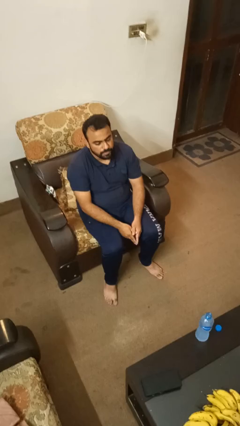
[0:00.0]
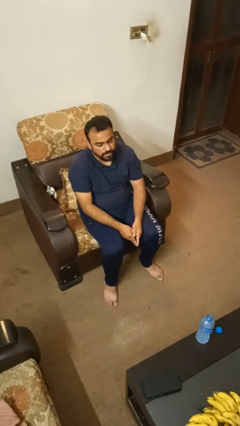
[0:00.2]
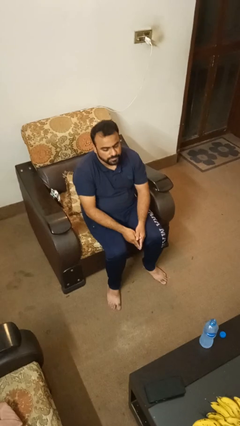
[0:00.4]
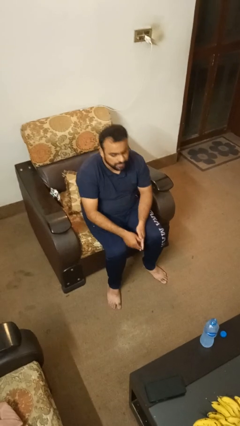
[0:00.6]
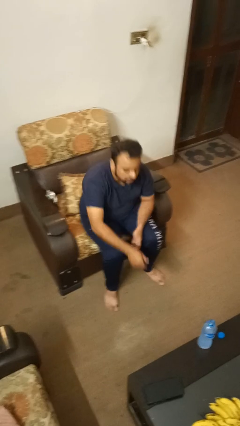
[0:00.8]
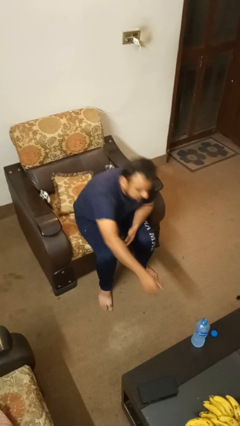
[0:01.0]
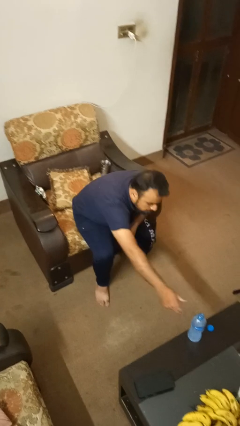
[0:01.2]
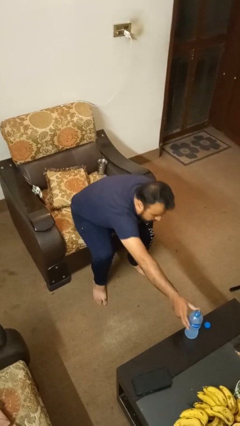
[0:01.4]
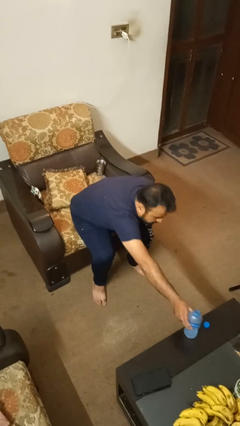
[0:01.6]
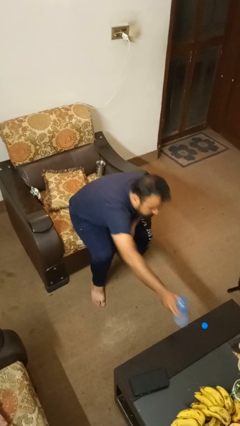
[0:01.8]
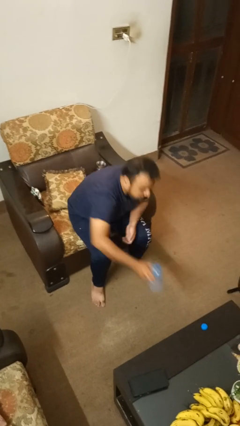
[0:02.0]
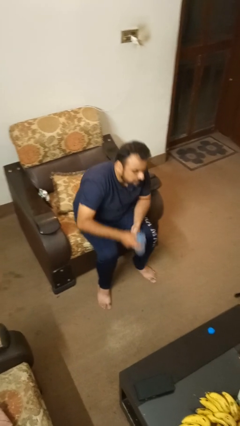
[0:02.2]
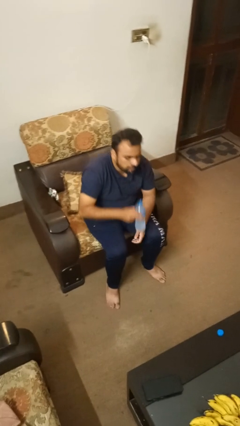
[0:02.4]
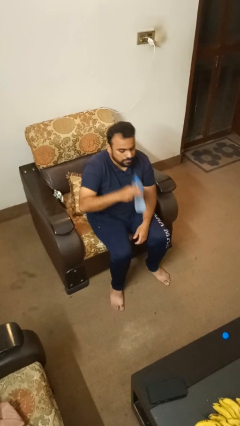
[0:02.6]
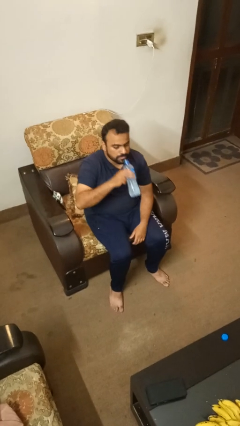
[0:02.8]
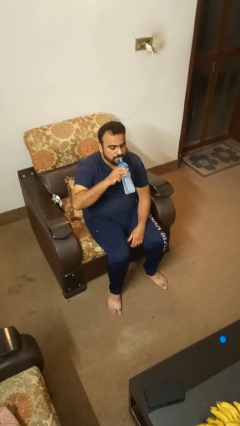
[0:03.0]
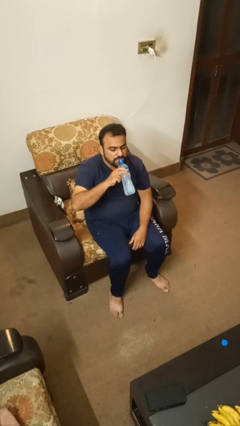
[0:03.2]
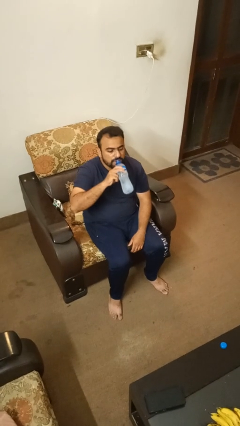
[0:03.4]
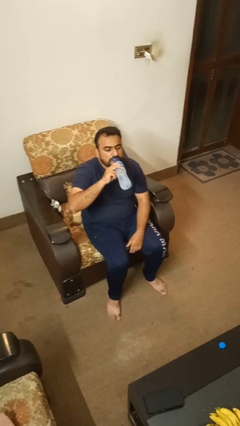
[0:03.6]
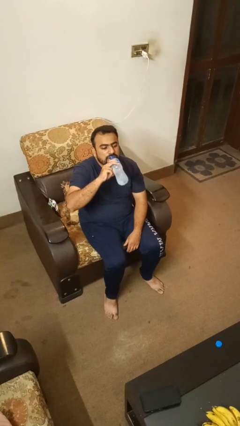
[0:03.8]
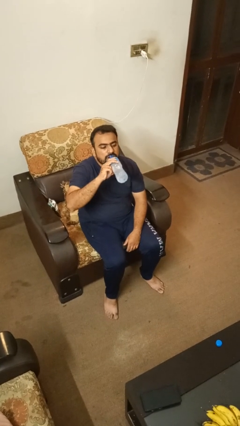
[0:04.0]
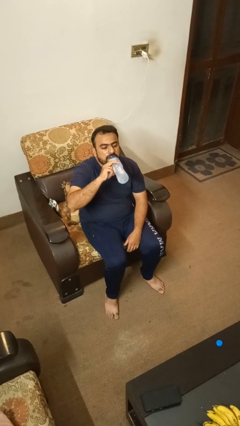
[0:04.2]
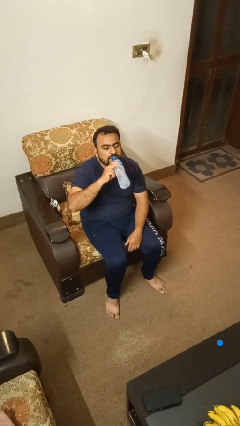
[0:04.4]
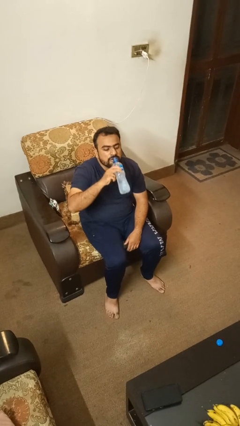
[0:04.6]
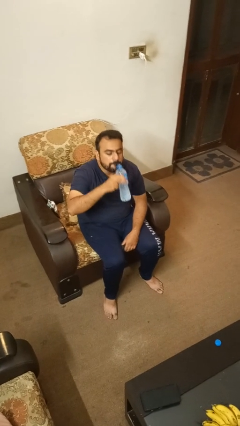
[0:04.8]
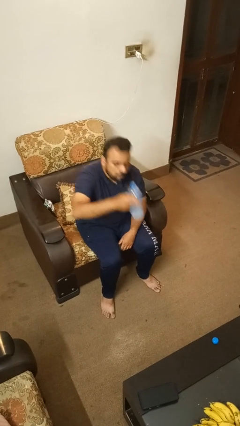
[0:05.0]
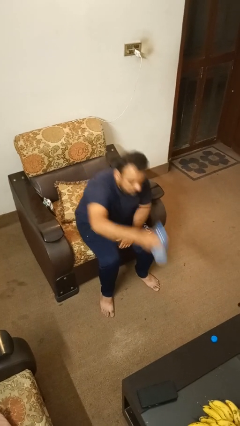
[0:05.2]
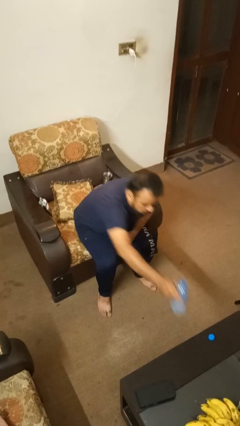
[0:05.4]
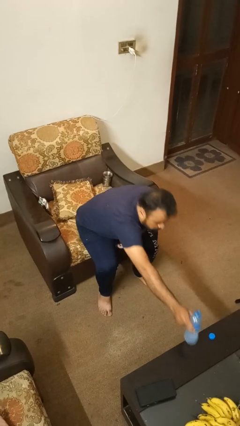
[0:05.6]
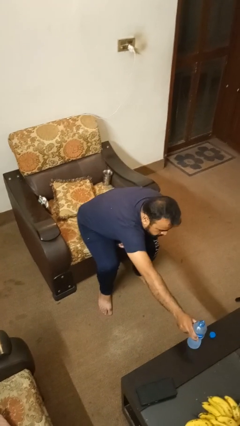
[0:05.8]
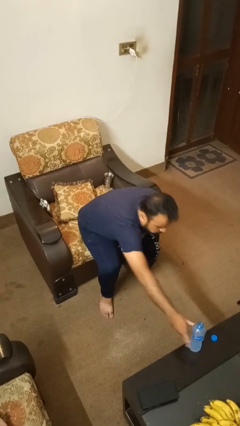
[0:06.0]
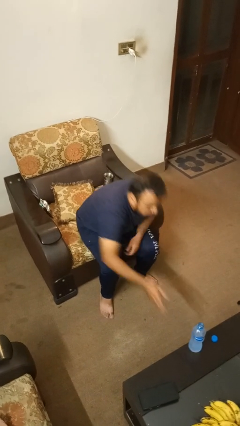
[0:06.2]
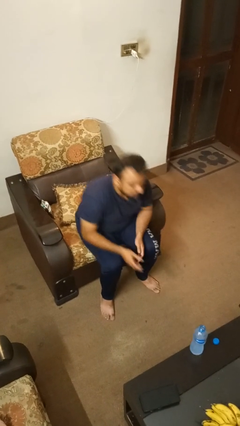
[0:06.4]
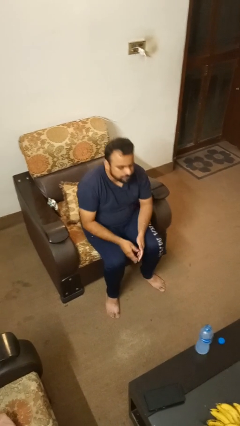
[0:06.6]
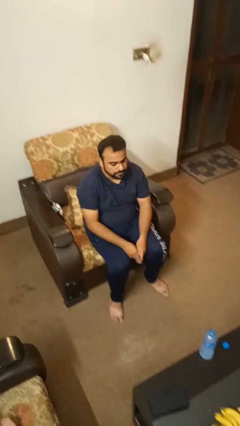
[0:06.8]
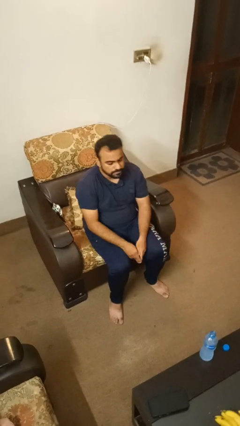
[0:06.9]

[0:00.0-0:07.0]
person drinks from bottle

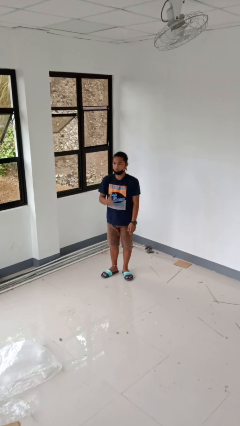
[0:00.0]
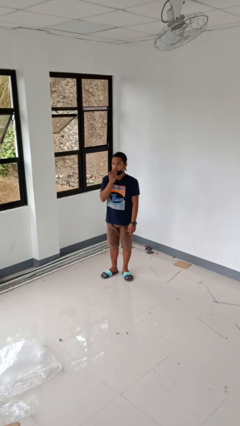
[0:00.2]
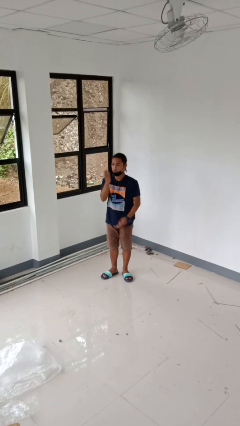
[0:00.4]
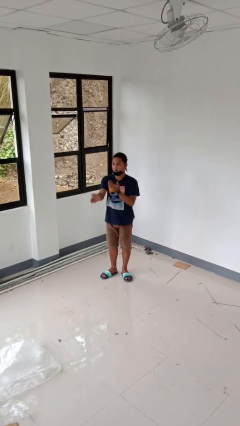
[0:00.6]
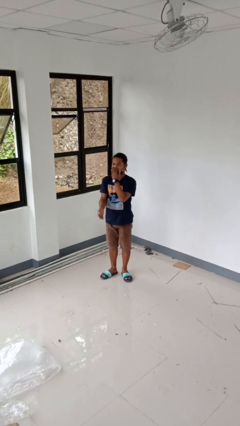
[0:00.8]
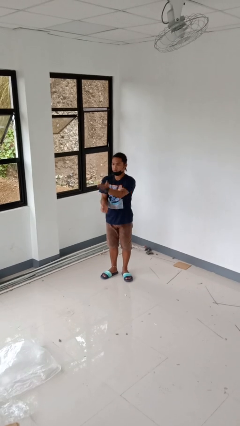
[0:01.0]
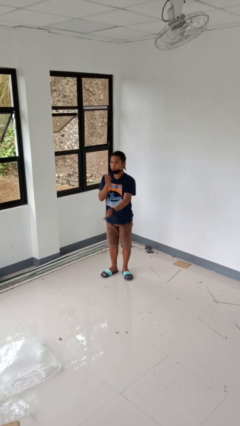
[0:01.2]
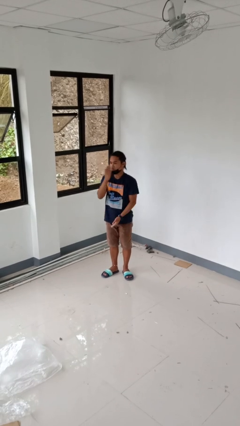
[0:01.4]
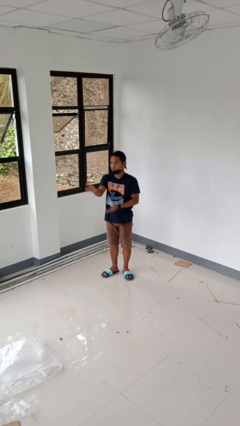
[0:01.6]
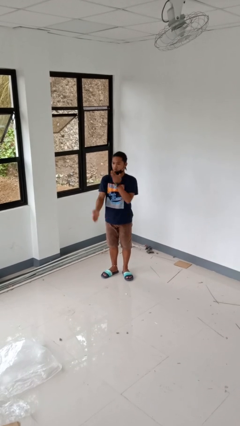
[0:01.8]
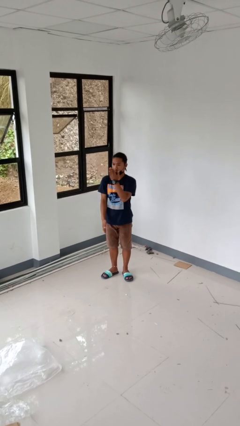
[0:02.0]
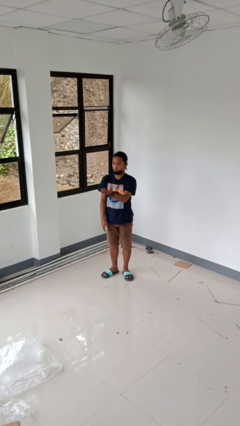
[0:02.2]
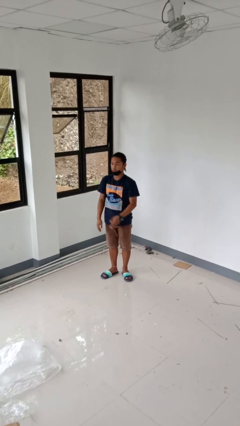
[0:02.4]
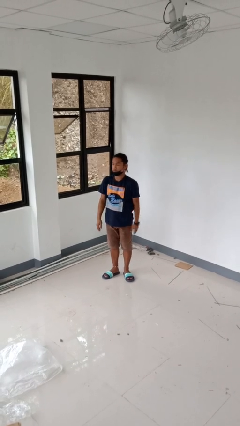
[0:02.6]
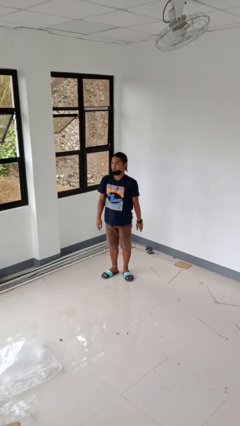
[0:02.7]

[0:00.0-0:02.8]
person gestures blow kiss

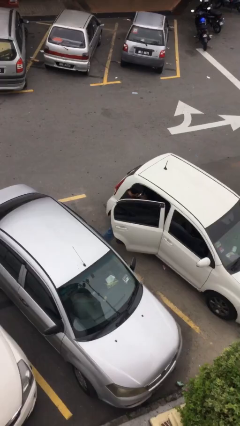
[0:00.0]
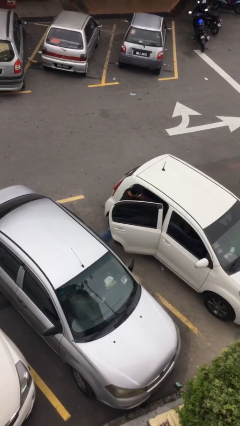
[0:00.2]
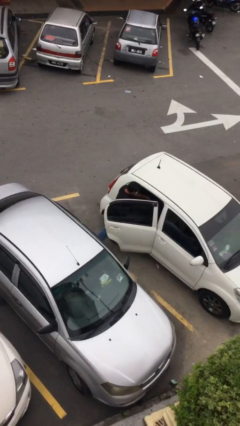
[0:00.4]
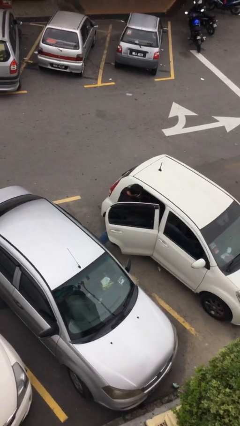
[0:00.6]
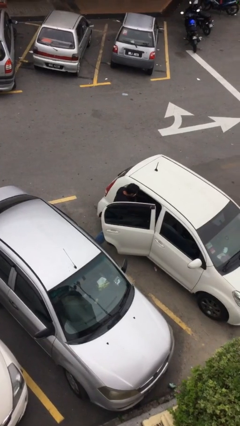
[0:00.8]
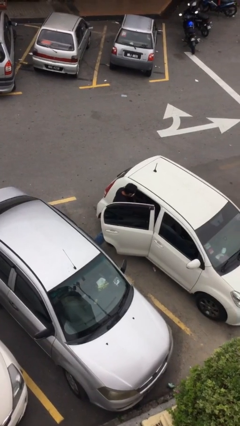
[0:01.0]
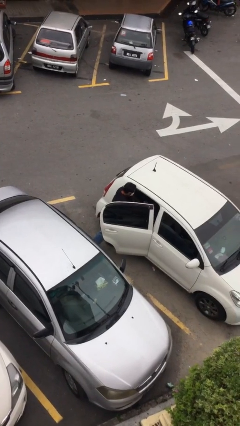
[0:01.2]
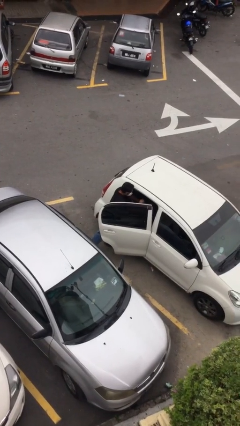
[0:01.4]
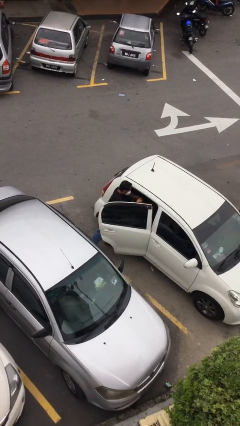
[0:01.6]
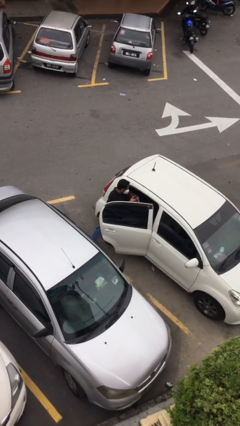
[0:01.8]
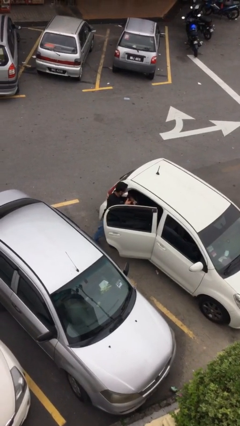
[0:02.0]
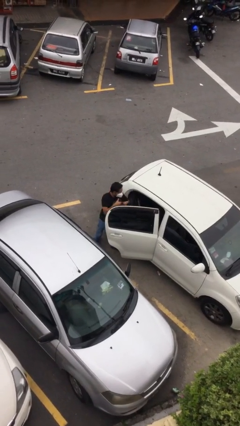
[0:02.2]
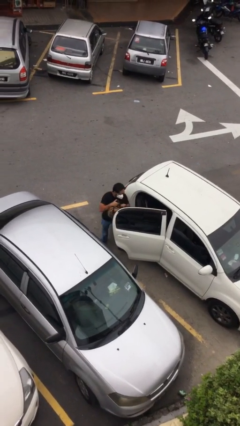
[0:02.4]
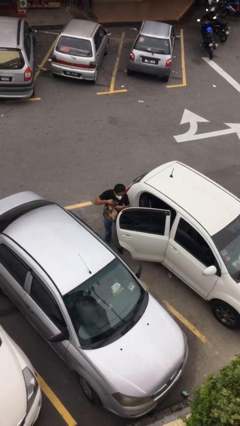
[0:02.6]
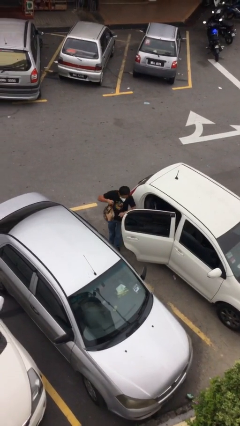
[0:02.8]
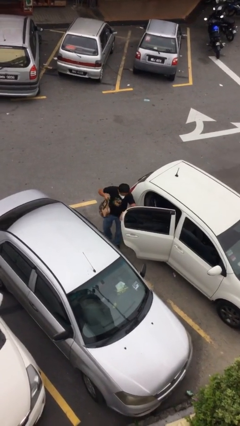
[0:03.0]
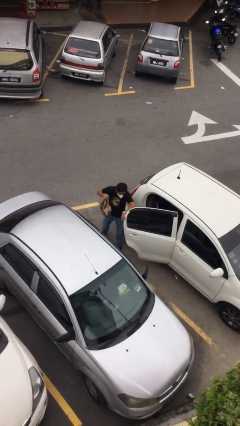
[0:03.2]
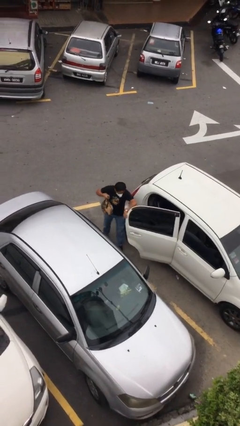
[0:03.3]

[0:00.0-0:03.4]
person unloads car

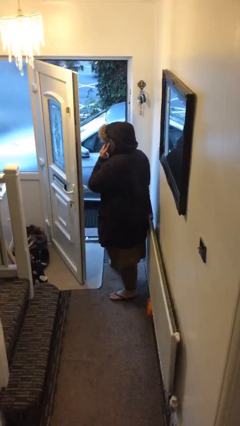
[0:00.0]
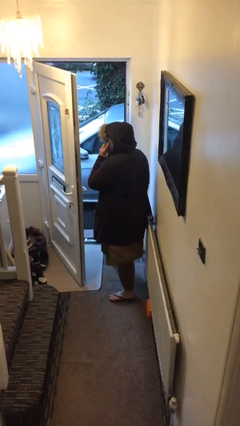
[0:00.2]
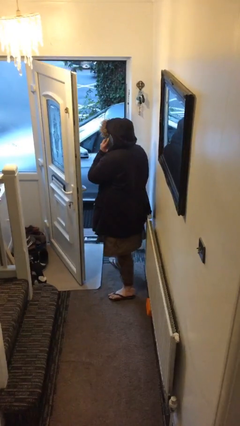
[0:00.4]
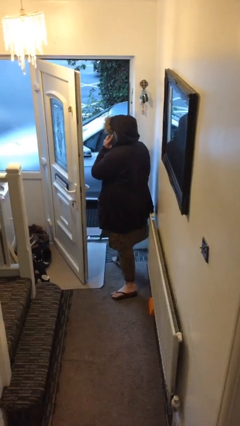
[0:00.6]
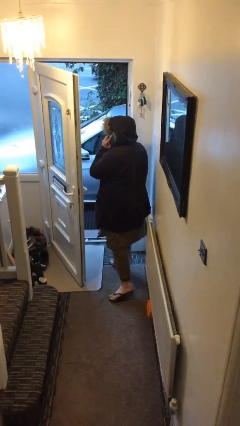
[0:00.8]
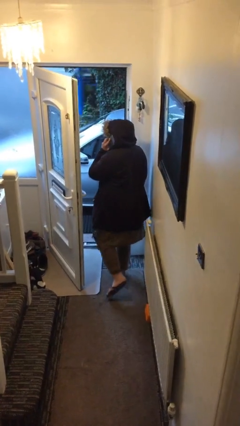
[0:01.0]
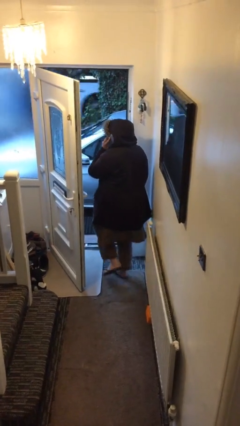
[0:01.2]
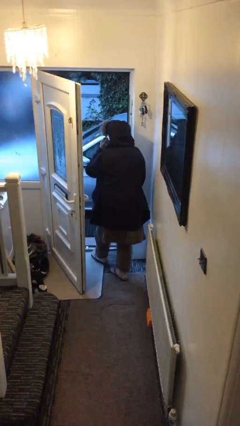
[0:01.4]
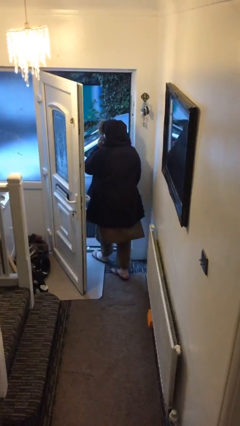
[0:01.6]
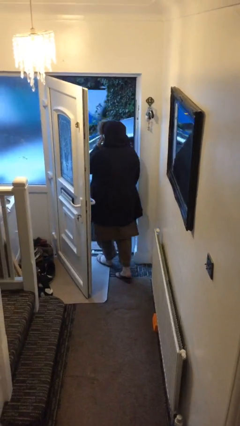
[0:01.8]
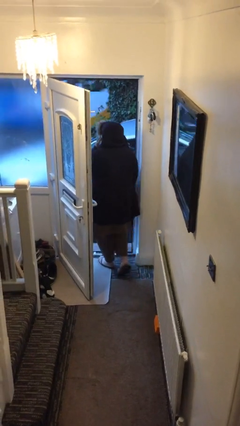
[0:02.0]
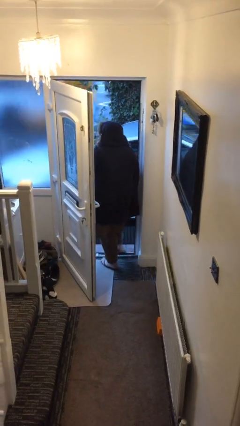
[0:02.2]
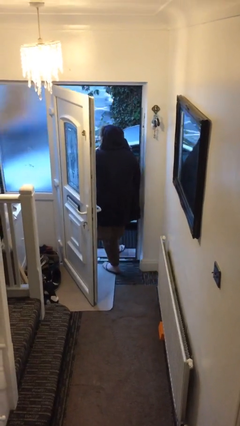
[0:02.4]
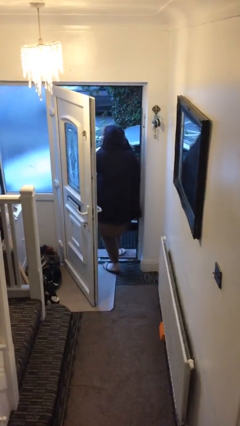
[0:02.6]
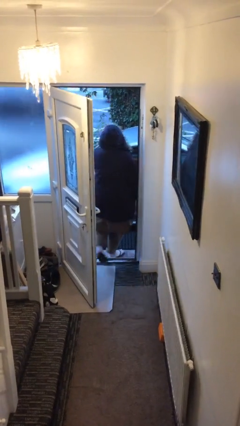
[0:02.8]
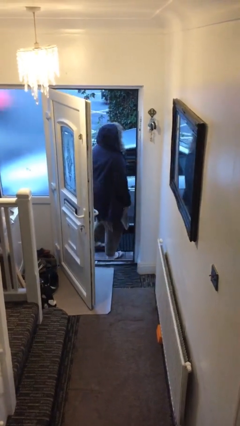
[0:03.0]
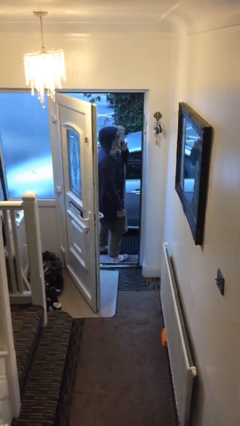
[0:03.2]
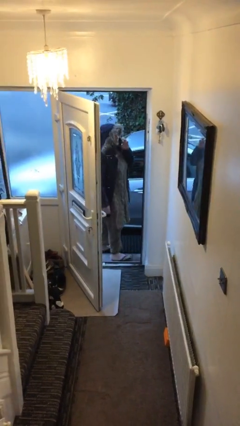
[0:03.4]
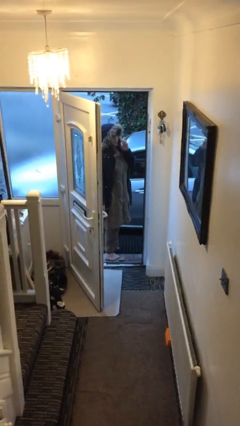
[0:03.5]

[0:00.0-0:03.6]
person exits scene through structure

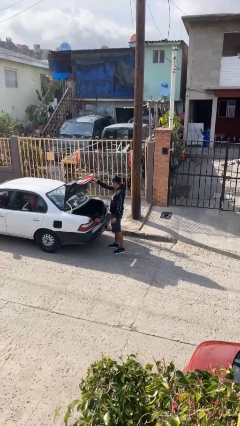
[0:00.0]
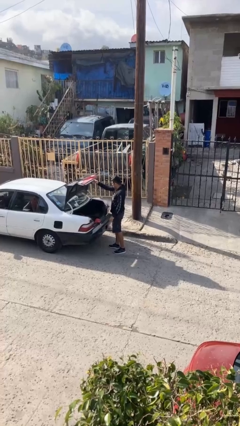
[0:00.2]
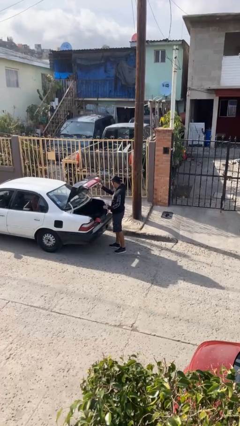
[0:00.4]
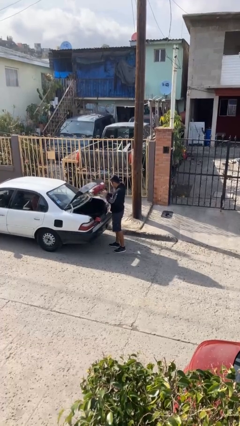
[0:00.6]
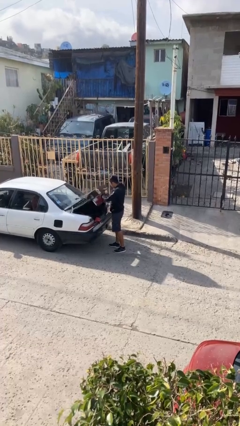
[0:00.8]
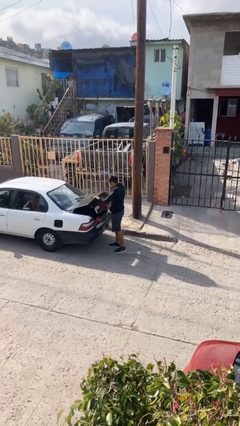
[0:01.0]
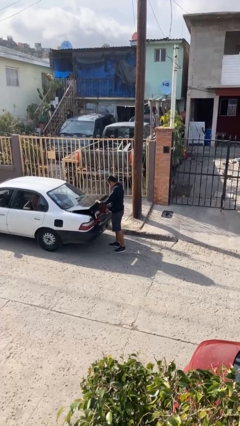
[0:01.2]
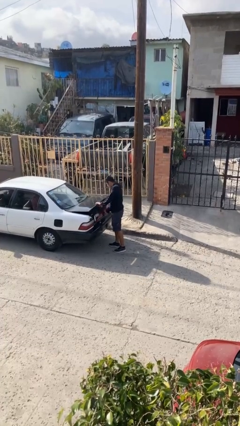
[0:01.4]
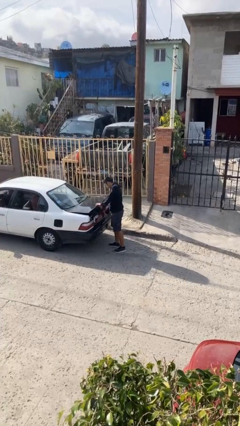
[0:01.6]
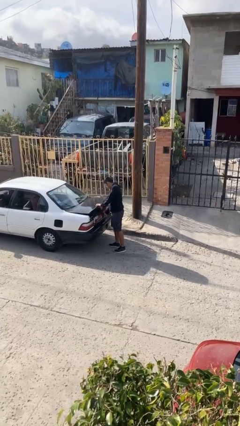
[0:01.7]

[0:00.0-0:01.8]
person closes car trunk
